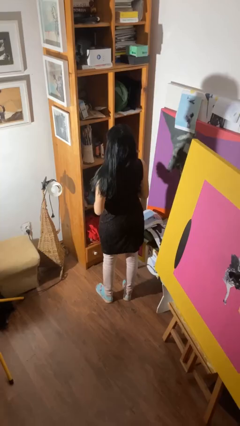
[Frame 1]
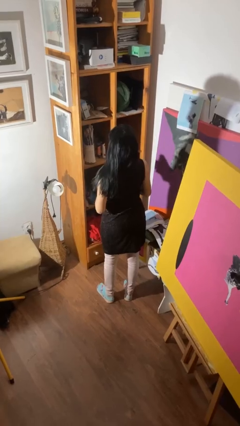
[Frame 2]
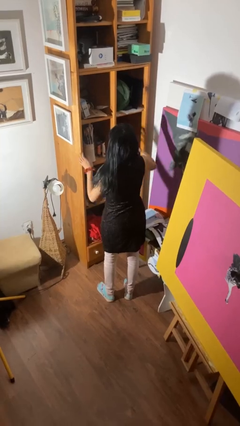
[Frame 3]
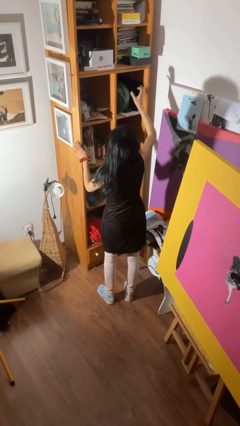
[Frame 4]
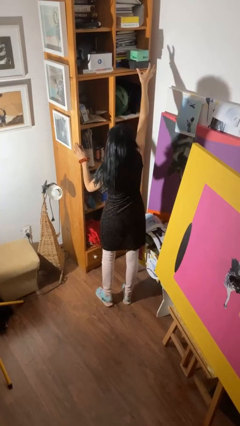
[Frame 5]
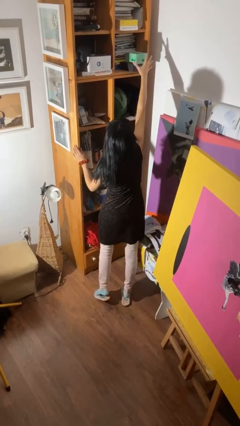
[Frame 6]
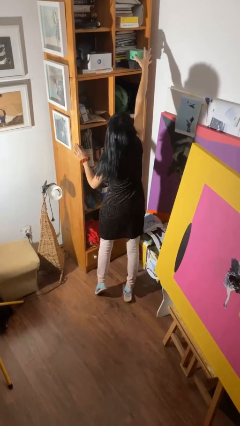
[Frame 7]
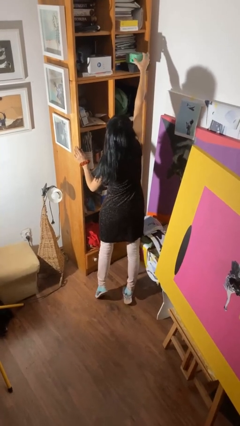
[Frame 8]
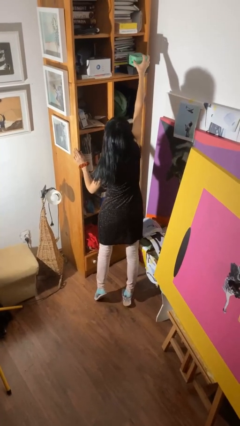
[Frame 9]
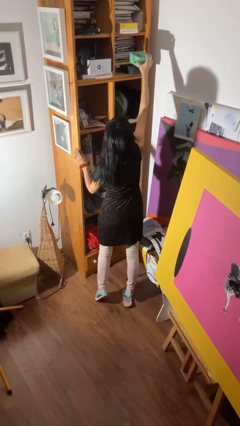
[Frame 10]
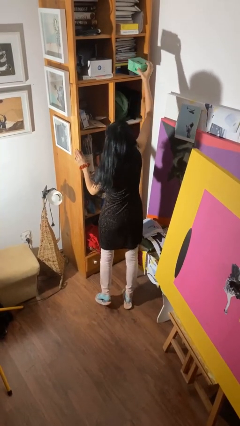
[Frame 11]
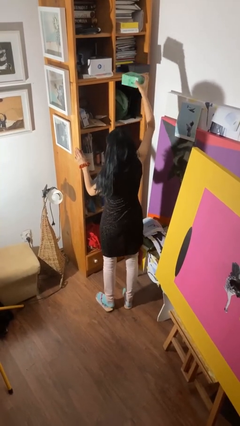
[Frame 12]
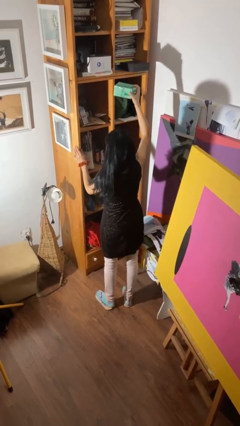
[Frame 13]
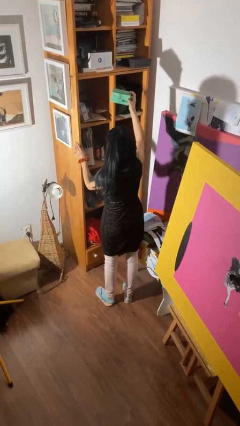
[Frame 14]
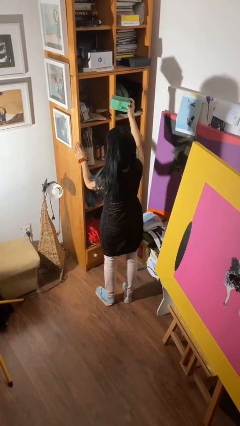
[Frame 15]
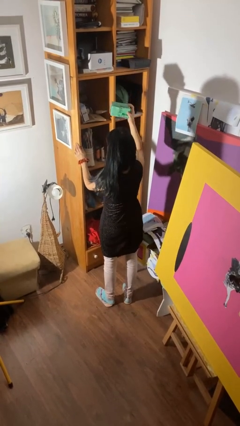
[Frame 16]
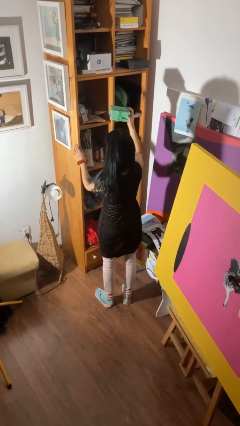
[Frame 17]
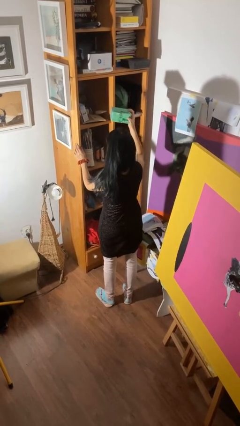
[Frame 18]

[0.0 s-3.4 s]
person picks up object from shelf

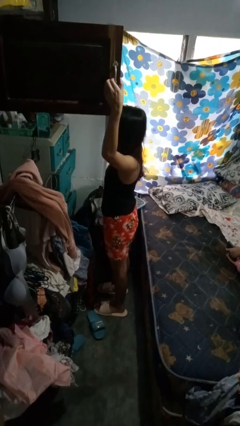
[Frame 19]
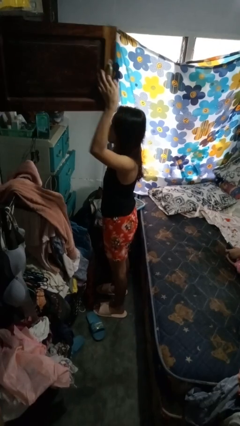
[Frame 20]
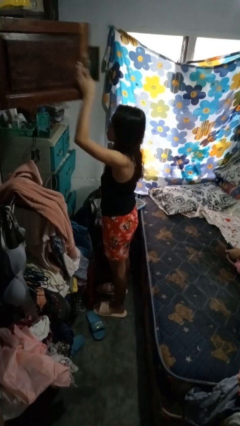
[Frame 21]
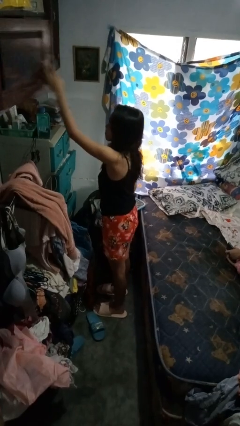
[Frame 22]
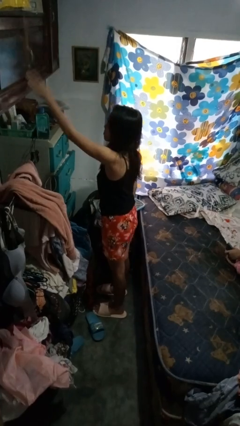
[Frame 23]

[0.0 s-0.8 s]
person closes closet door

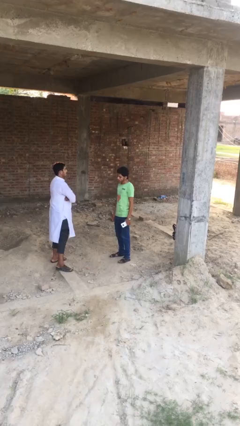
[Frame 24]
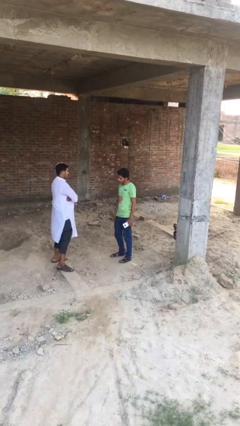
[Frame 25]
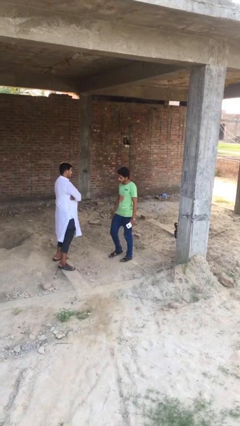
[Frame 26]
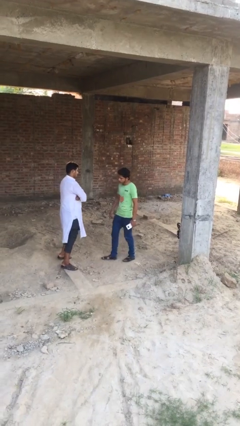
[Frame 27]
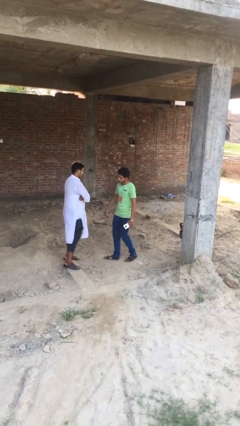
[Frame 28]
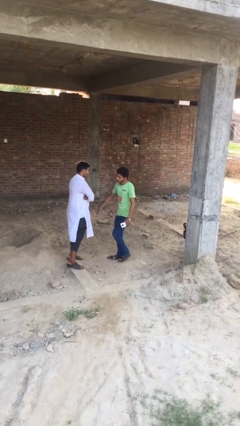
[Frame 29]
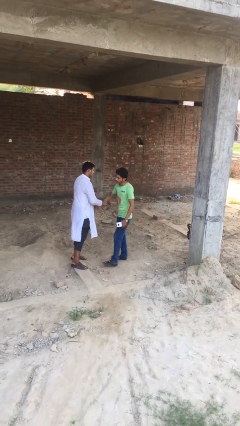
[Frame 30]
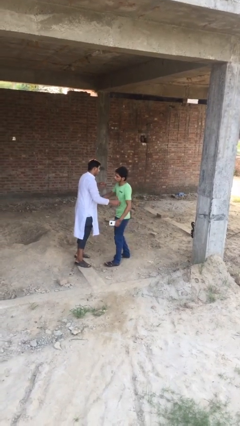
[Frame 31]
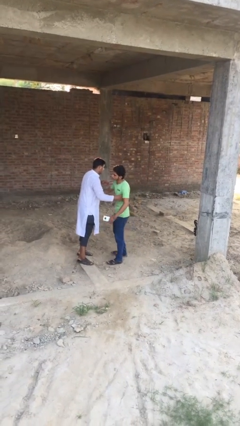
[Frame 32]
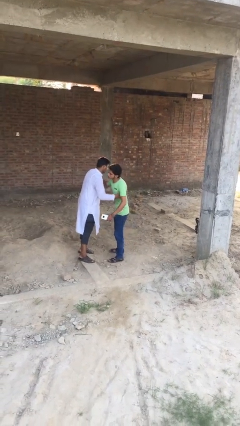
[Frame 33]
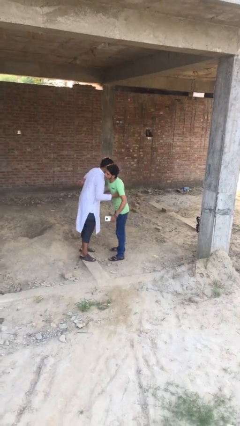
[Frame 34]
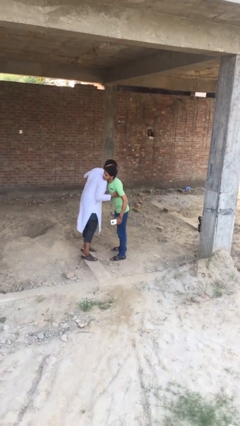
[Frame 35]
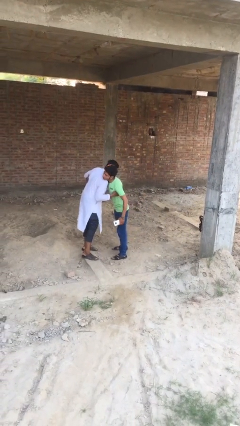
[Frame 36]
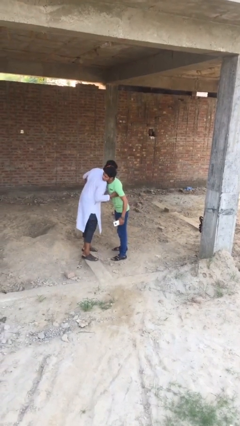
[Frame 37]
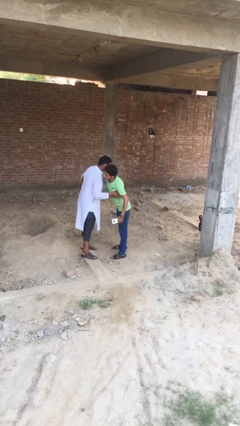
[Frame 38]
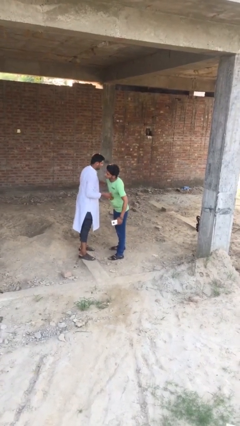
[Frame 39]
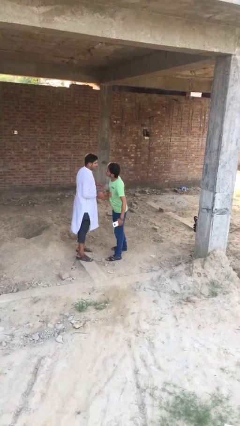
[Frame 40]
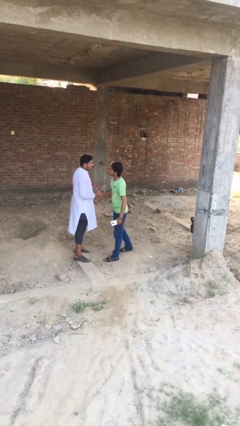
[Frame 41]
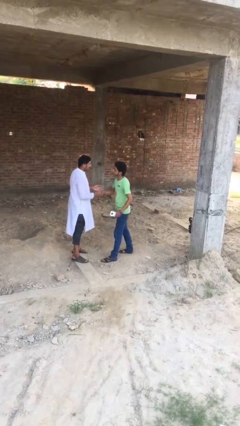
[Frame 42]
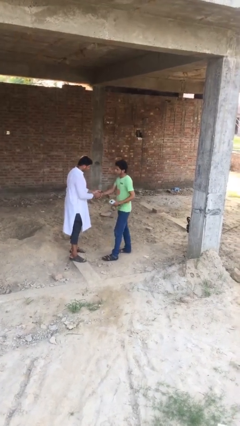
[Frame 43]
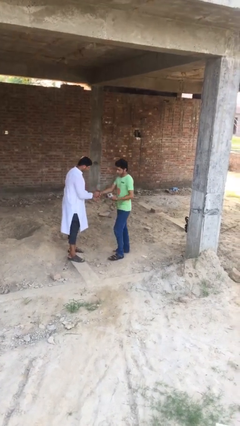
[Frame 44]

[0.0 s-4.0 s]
person embraces person

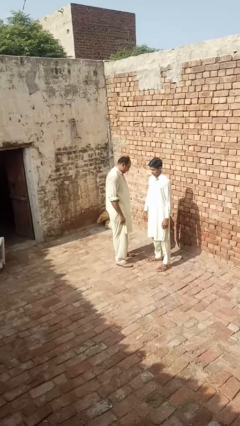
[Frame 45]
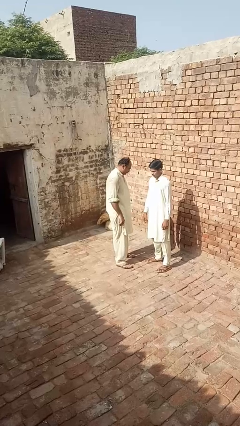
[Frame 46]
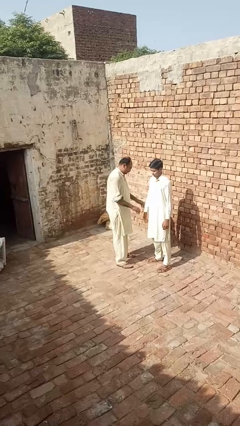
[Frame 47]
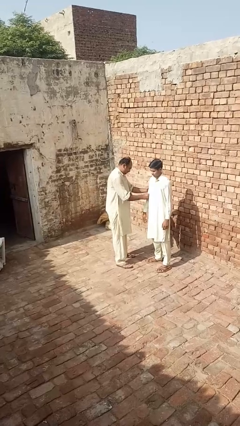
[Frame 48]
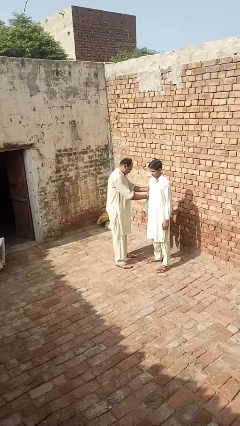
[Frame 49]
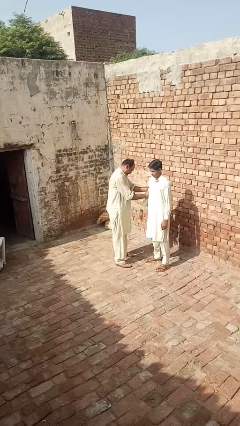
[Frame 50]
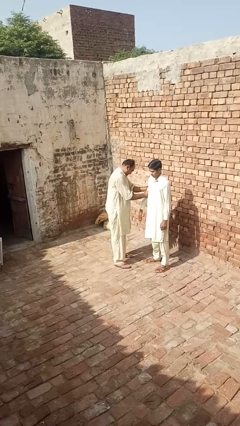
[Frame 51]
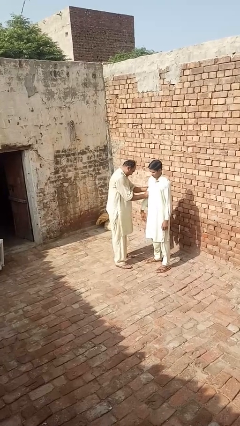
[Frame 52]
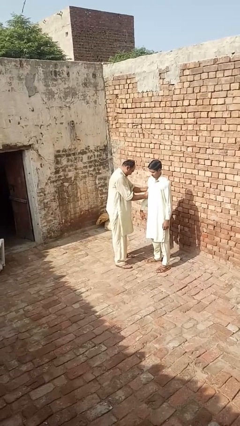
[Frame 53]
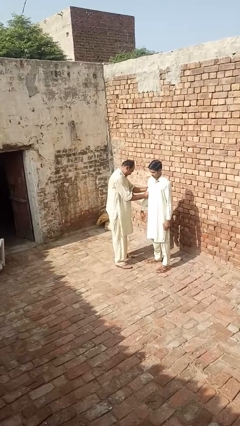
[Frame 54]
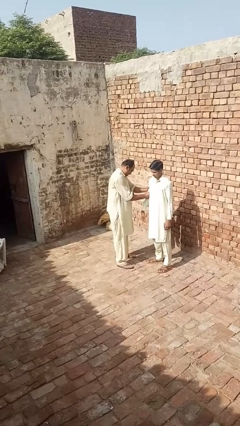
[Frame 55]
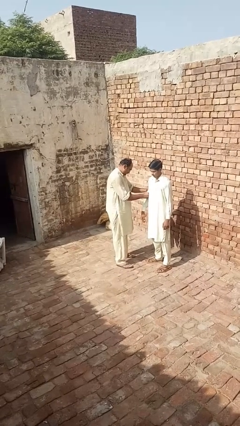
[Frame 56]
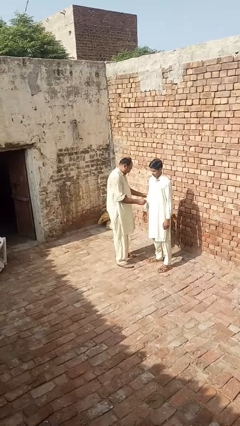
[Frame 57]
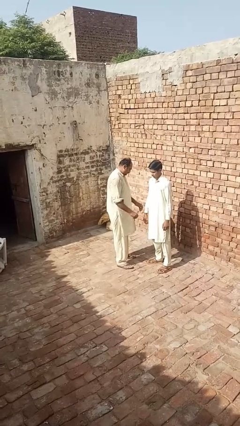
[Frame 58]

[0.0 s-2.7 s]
person grabs person by bicep

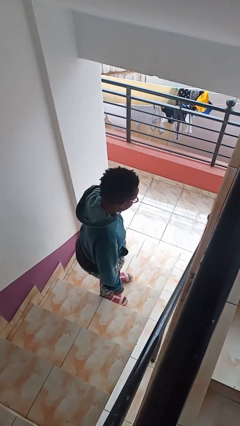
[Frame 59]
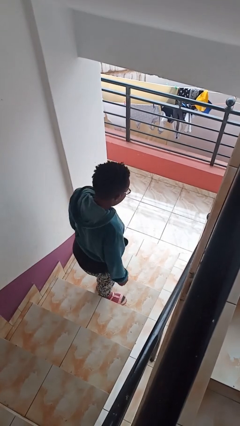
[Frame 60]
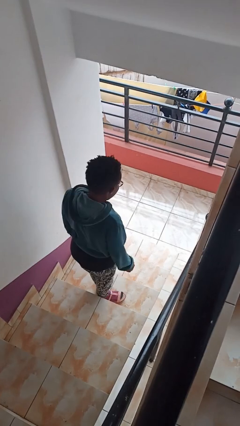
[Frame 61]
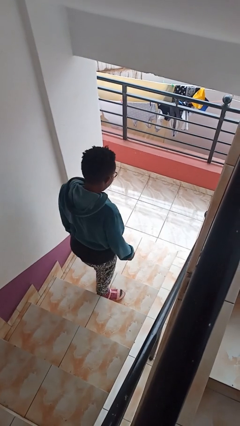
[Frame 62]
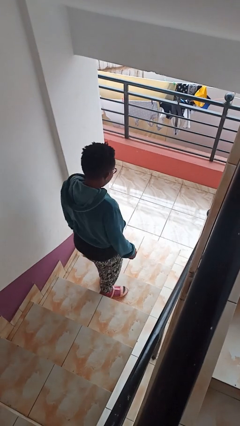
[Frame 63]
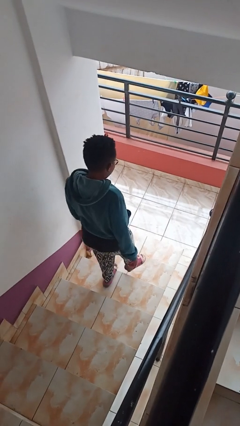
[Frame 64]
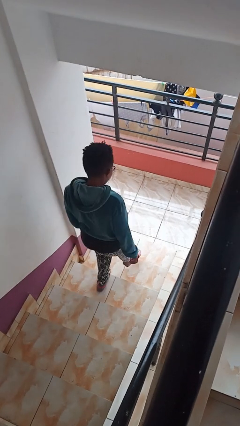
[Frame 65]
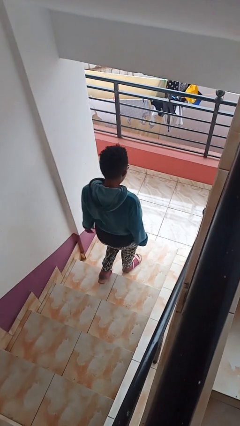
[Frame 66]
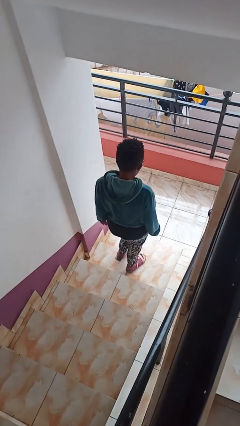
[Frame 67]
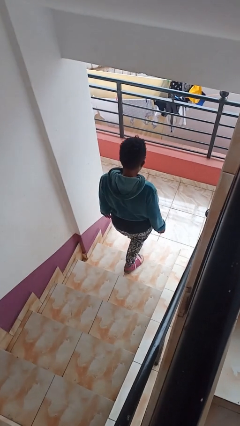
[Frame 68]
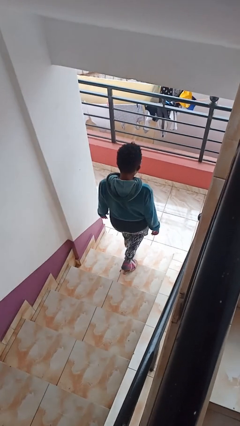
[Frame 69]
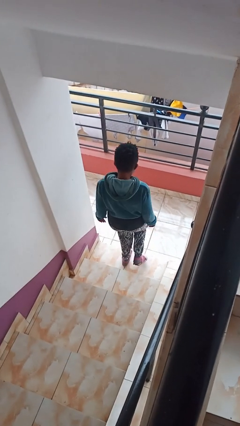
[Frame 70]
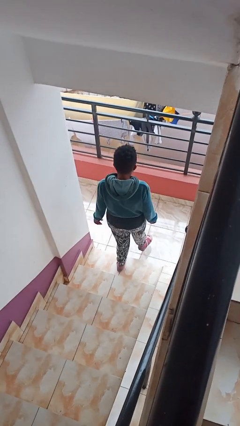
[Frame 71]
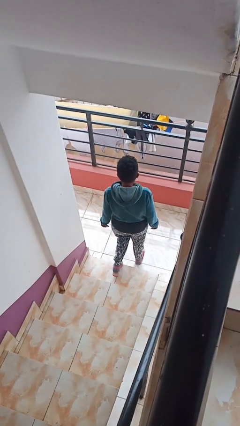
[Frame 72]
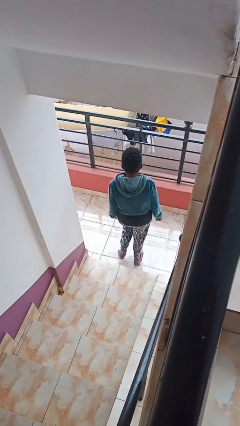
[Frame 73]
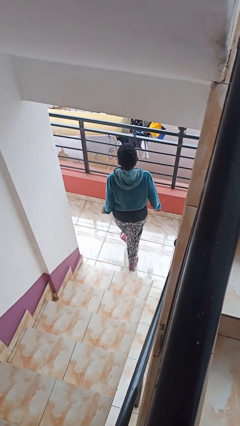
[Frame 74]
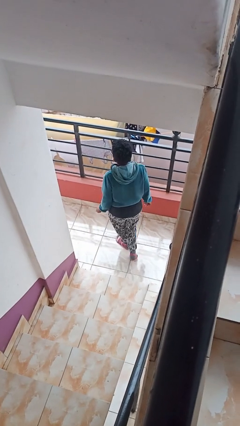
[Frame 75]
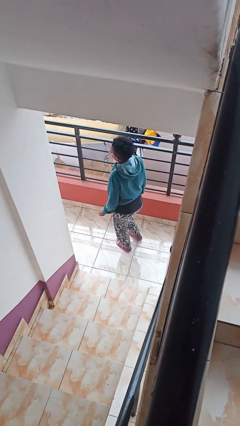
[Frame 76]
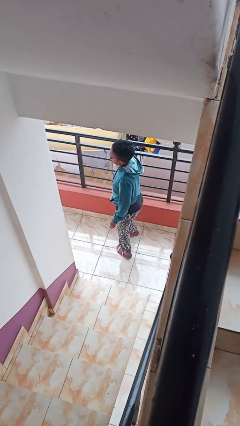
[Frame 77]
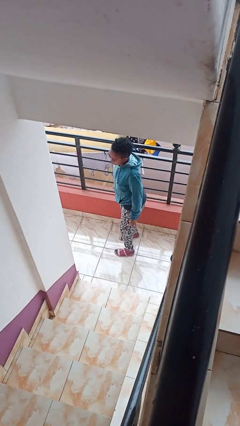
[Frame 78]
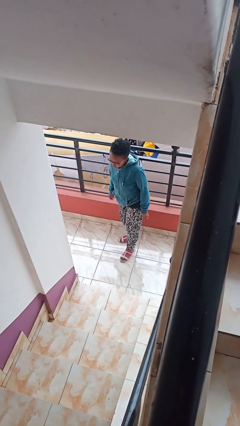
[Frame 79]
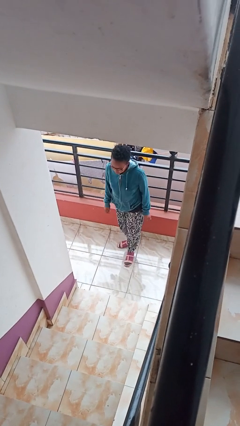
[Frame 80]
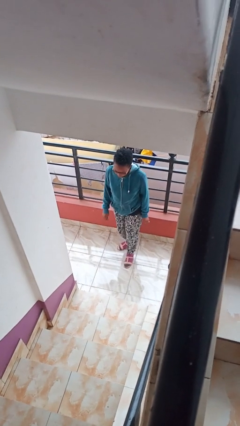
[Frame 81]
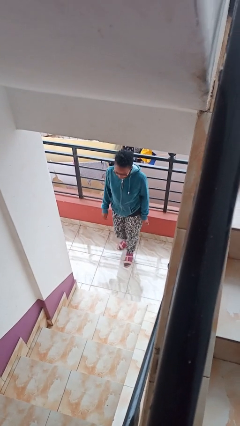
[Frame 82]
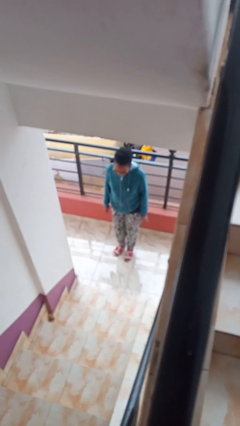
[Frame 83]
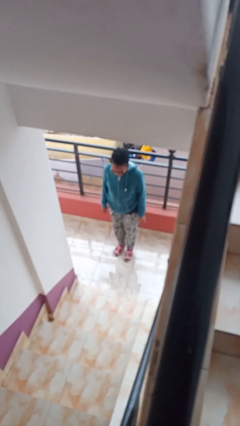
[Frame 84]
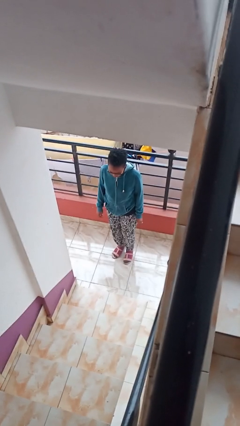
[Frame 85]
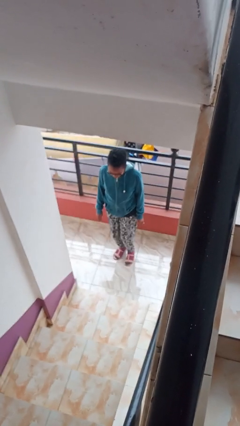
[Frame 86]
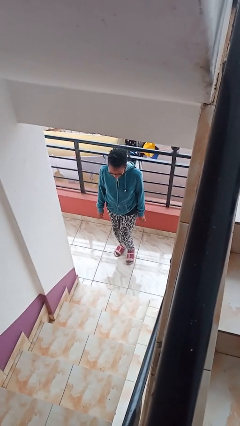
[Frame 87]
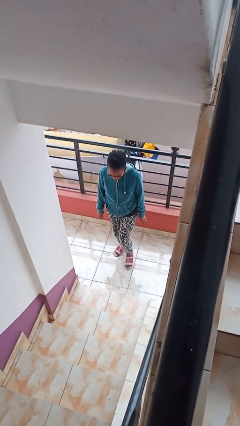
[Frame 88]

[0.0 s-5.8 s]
person climbs down stairs

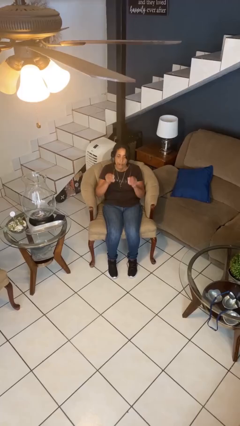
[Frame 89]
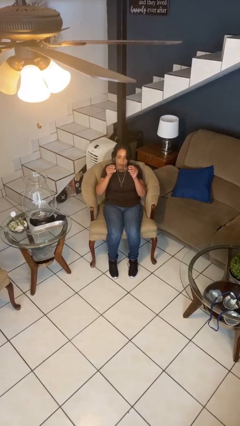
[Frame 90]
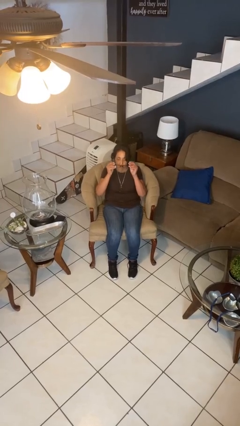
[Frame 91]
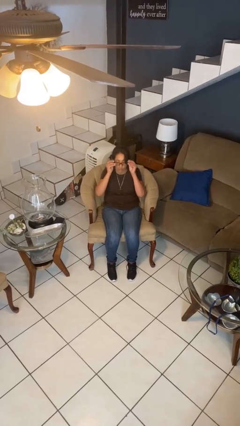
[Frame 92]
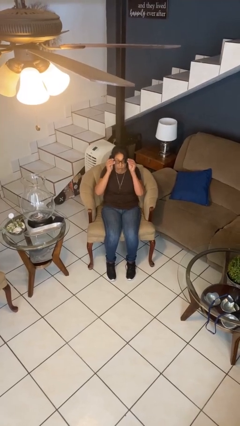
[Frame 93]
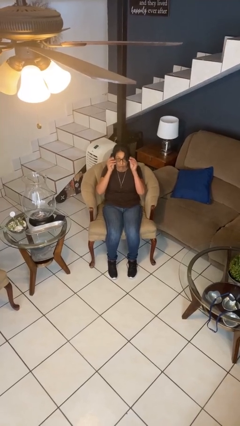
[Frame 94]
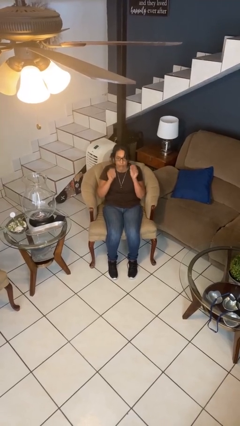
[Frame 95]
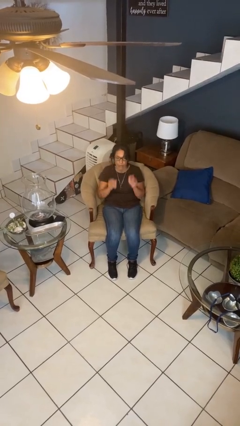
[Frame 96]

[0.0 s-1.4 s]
person puts on glasses
